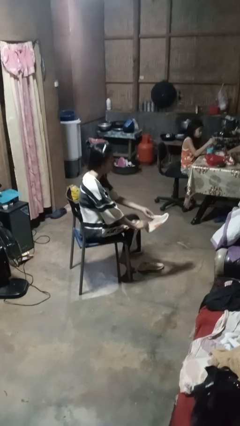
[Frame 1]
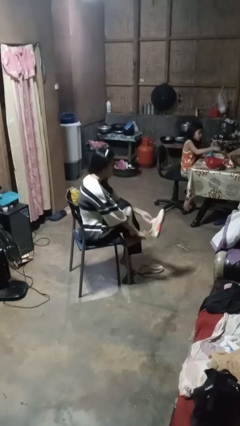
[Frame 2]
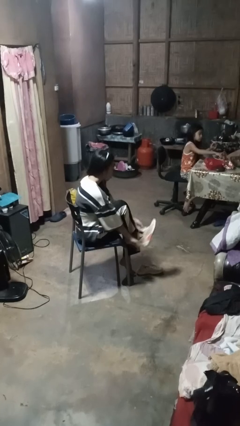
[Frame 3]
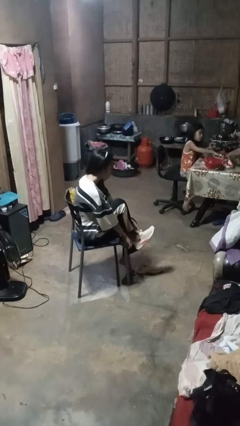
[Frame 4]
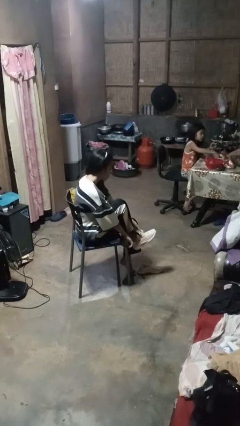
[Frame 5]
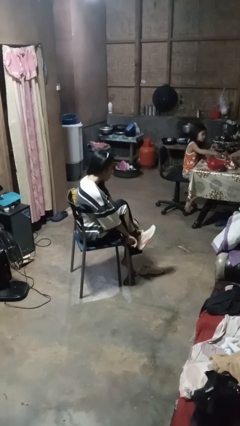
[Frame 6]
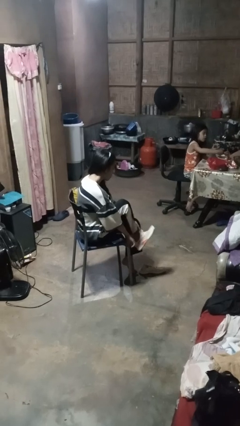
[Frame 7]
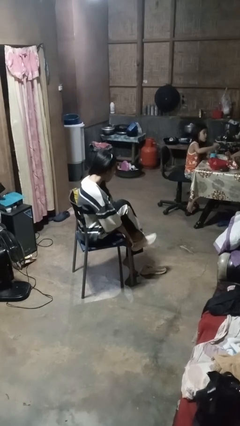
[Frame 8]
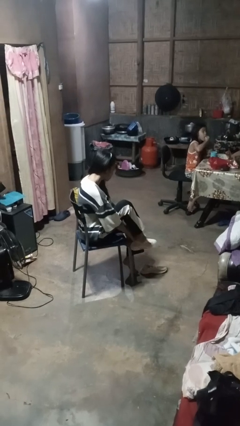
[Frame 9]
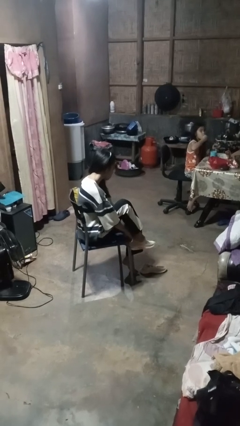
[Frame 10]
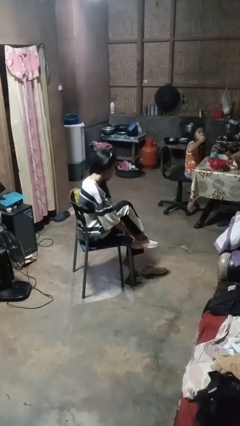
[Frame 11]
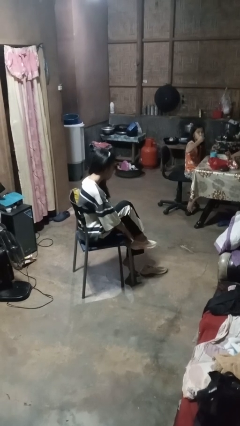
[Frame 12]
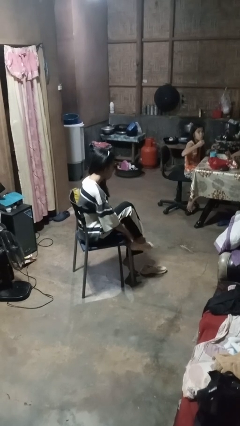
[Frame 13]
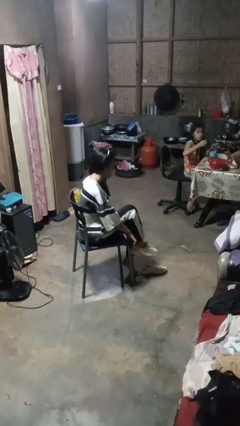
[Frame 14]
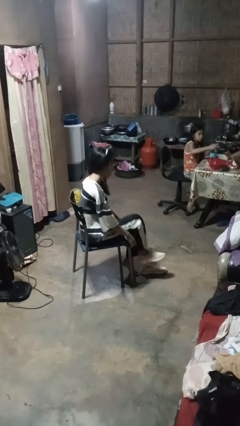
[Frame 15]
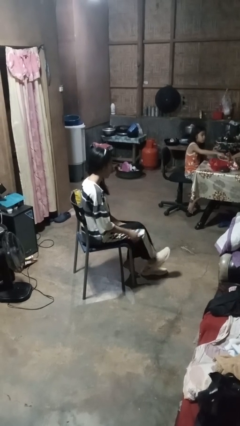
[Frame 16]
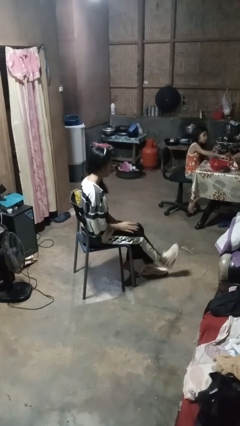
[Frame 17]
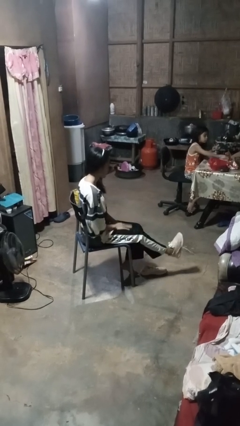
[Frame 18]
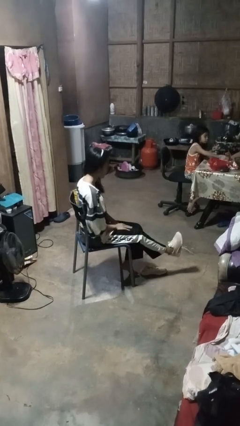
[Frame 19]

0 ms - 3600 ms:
person puts on shoes

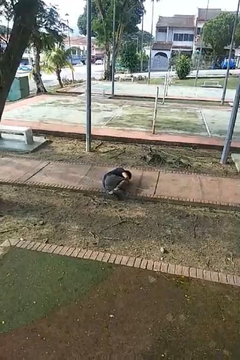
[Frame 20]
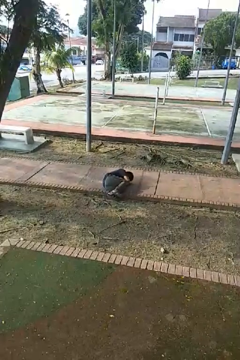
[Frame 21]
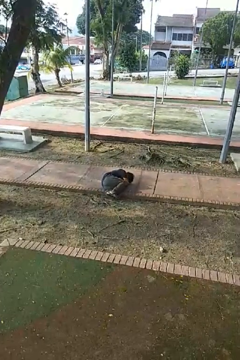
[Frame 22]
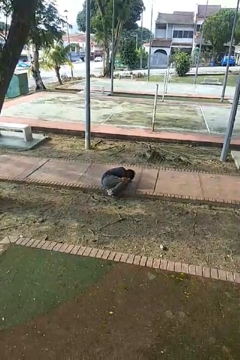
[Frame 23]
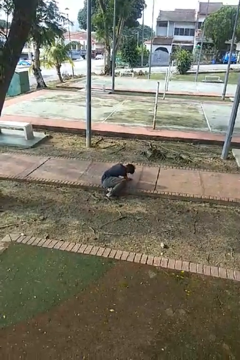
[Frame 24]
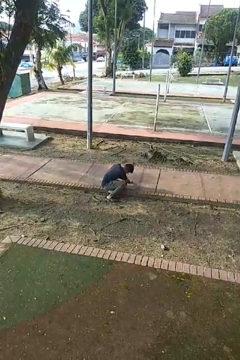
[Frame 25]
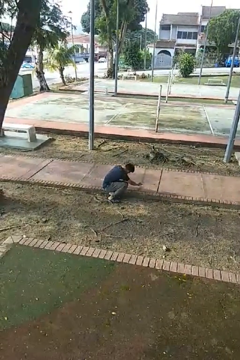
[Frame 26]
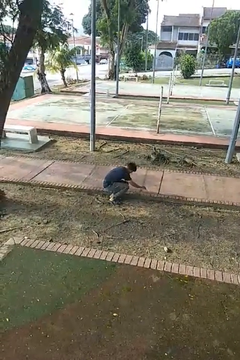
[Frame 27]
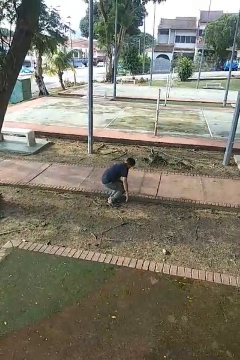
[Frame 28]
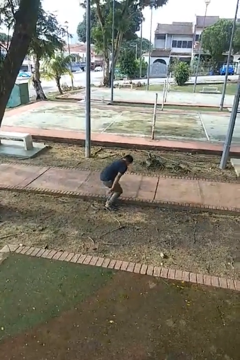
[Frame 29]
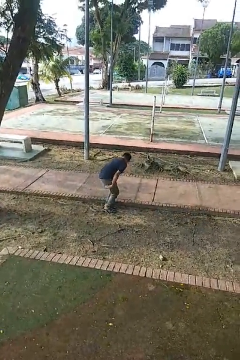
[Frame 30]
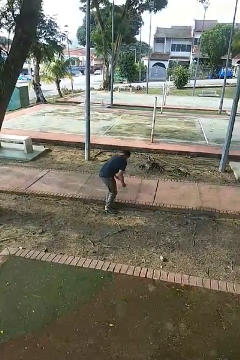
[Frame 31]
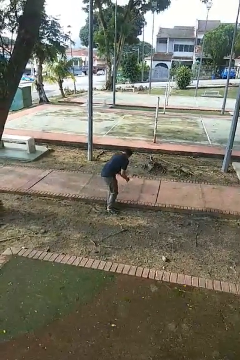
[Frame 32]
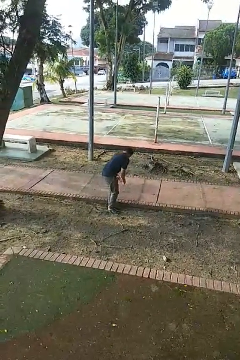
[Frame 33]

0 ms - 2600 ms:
person stands up from floor

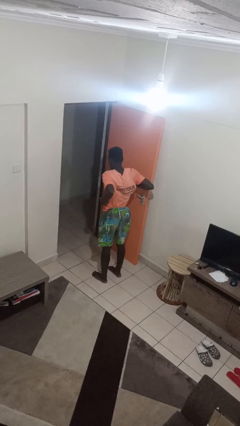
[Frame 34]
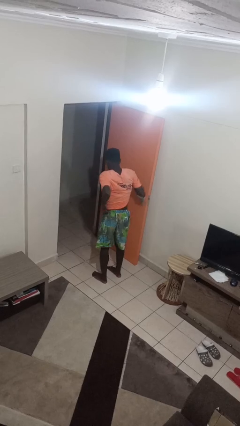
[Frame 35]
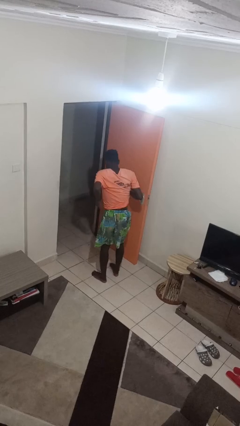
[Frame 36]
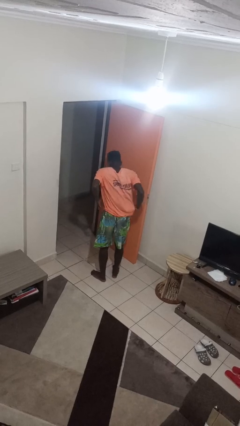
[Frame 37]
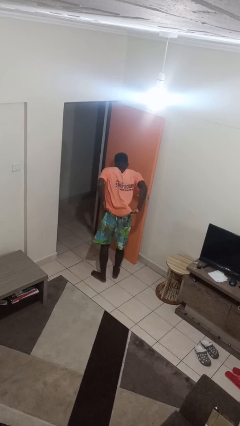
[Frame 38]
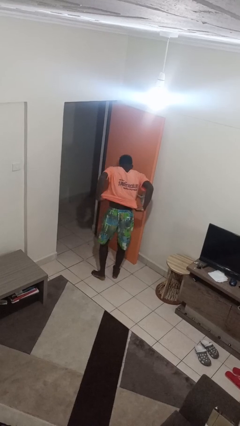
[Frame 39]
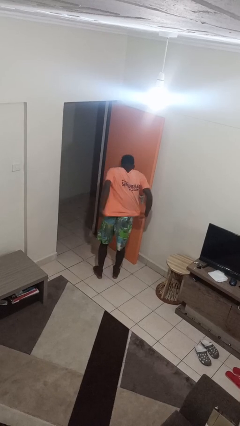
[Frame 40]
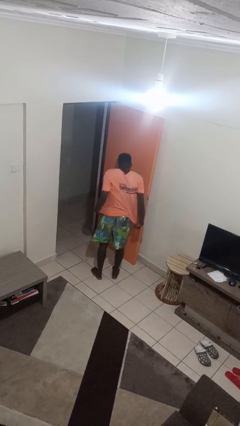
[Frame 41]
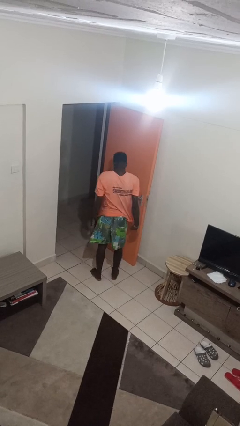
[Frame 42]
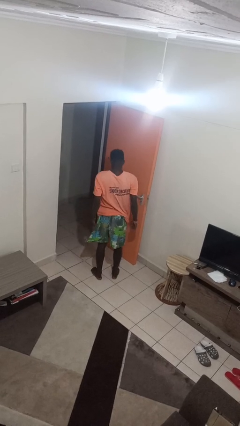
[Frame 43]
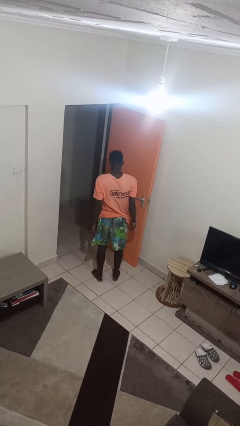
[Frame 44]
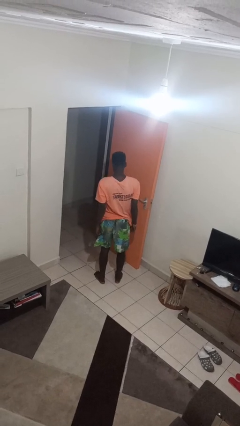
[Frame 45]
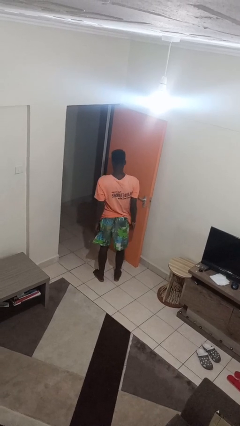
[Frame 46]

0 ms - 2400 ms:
person untucks shirt

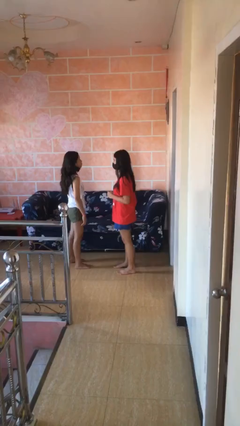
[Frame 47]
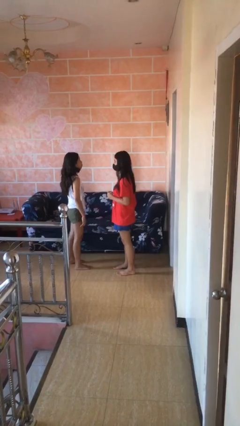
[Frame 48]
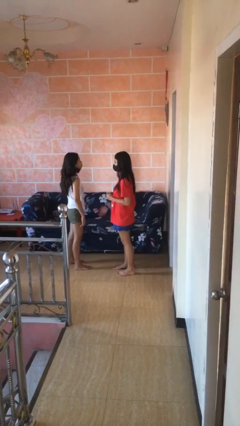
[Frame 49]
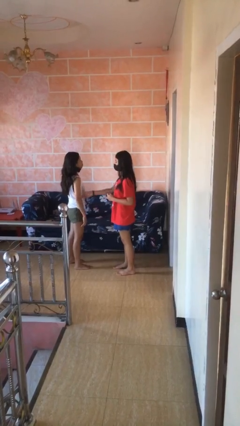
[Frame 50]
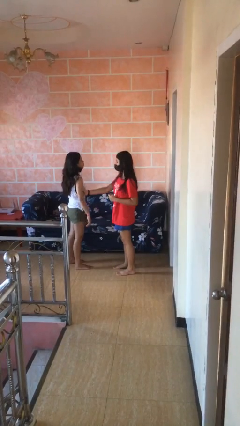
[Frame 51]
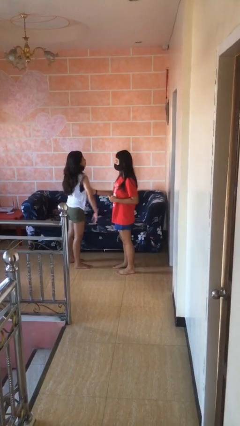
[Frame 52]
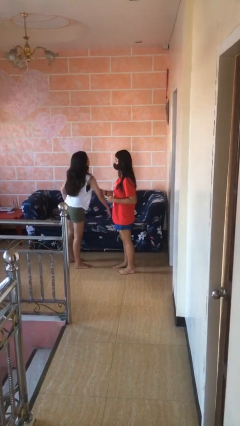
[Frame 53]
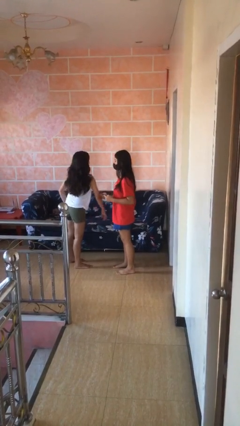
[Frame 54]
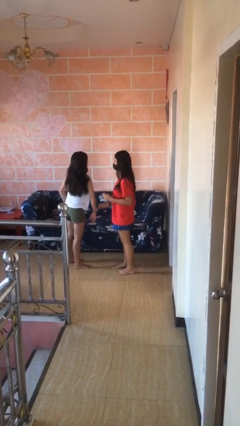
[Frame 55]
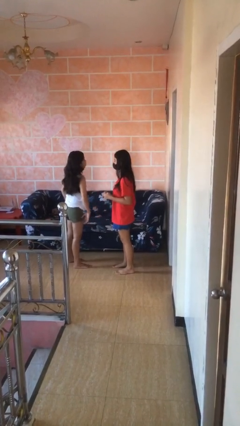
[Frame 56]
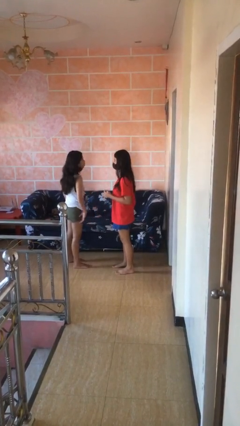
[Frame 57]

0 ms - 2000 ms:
person grabs person by bicep

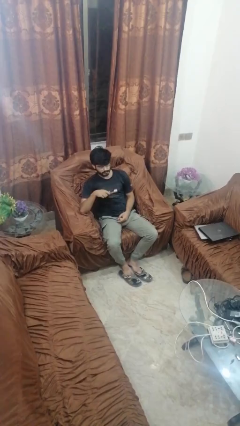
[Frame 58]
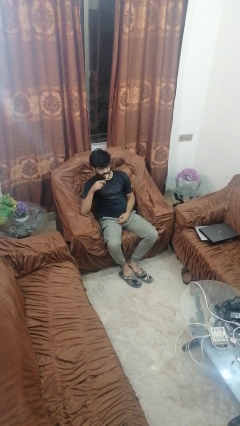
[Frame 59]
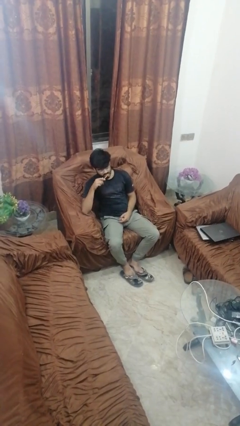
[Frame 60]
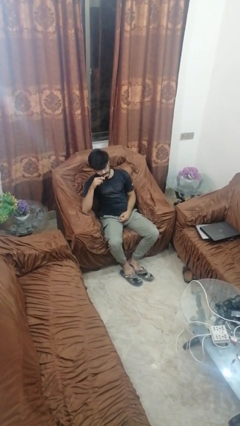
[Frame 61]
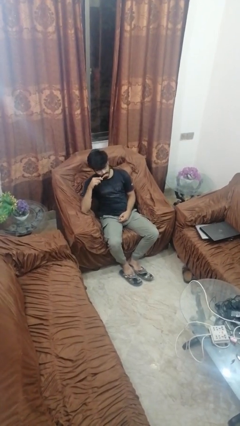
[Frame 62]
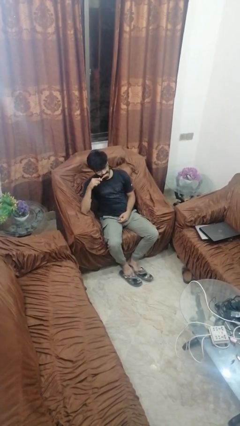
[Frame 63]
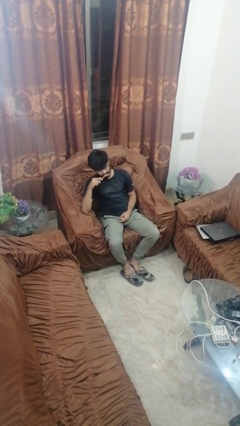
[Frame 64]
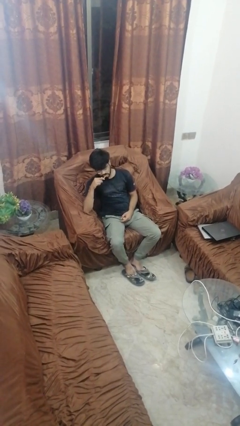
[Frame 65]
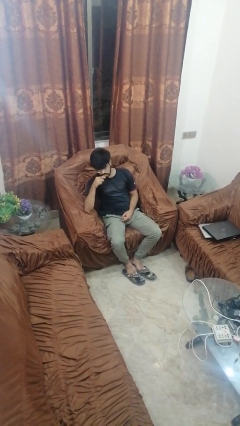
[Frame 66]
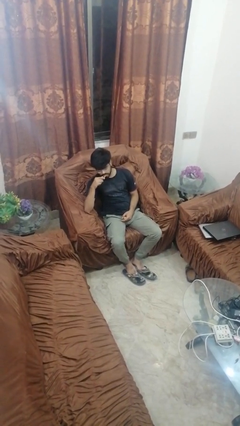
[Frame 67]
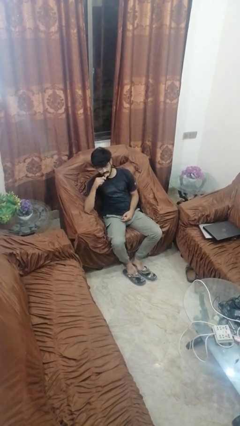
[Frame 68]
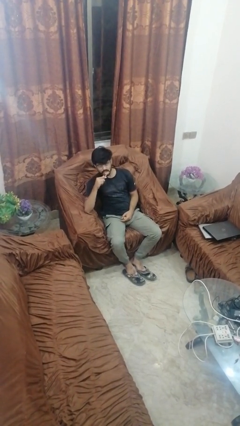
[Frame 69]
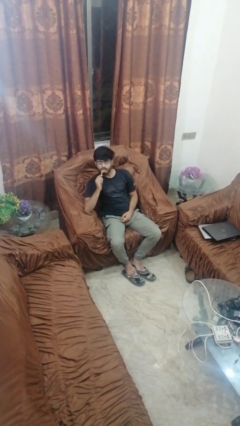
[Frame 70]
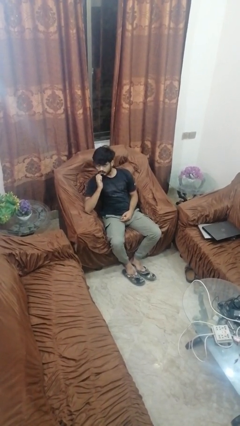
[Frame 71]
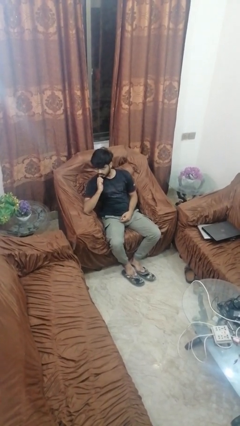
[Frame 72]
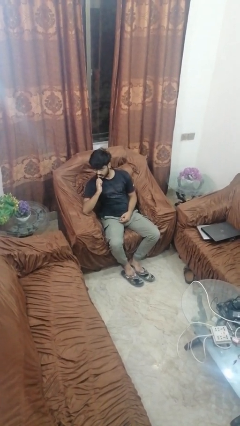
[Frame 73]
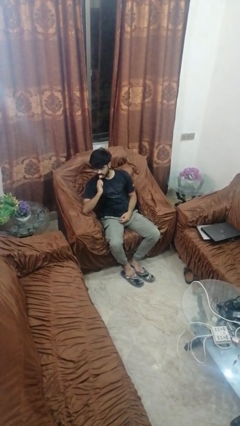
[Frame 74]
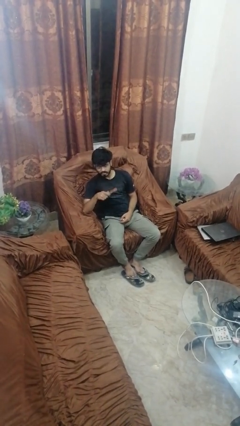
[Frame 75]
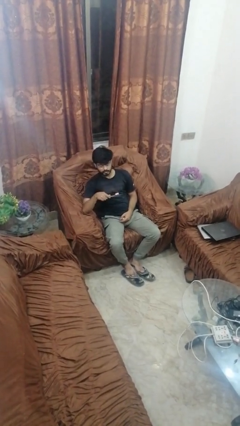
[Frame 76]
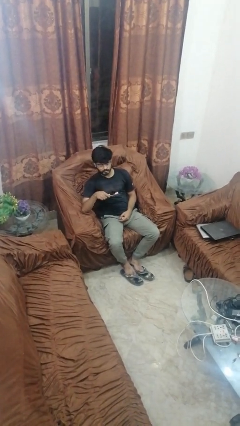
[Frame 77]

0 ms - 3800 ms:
person brushes teeth

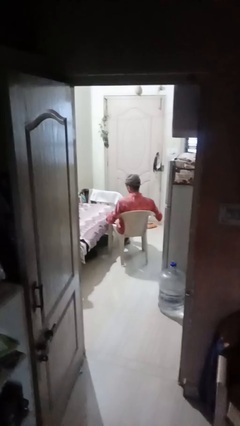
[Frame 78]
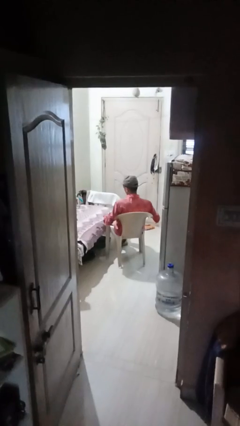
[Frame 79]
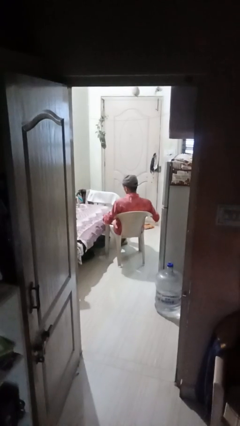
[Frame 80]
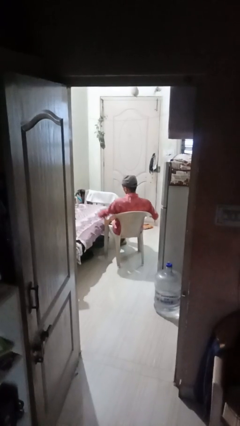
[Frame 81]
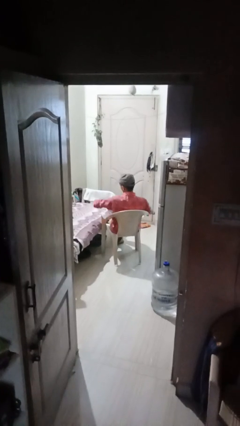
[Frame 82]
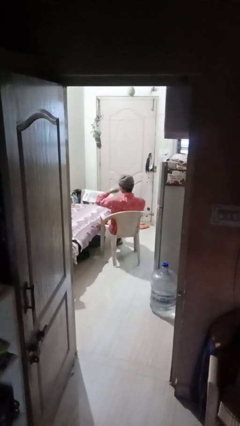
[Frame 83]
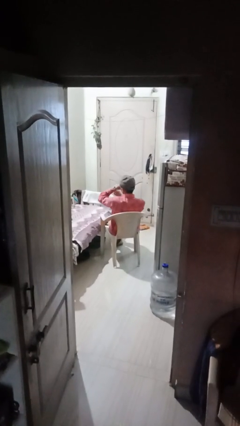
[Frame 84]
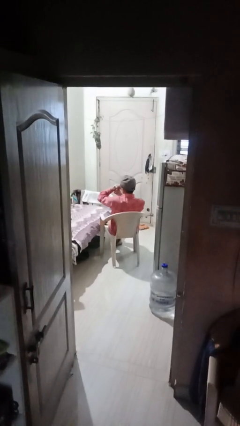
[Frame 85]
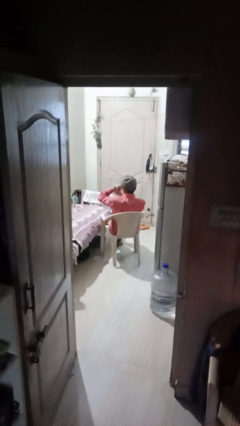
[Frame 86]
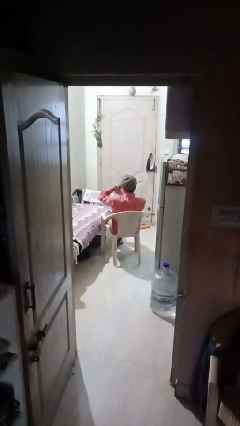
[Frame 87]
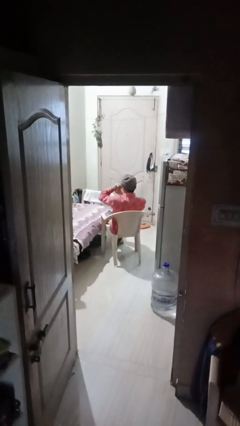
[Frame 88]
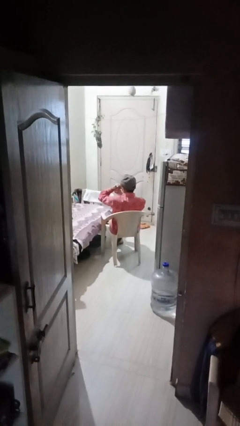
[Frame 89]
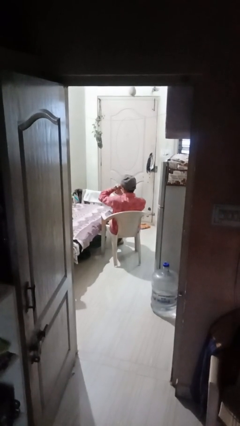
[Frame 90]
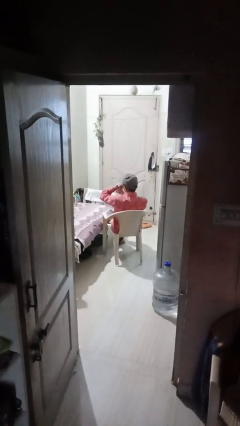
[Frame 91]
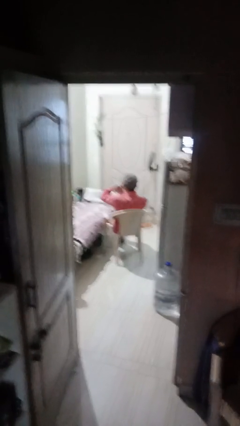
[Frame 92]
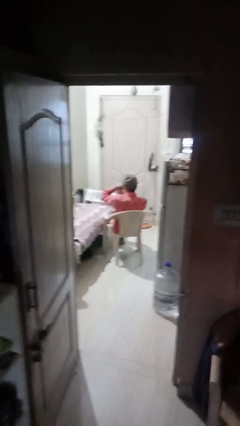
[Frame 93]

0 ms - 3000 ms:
person looks at wristwatch
